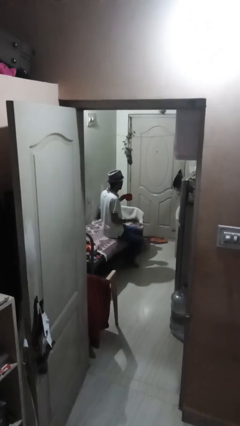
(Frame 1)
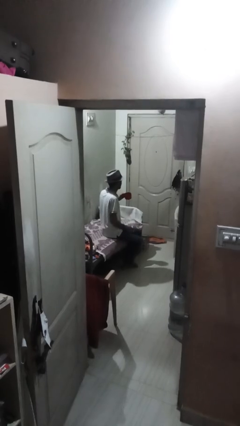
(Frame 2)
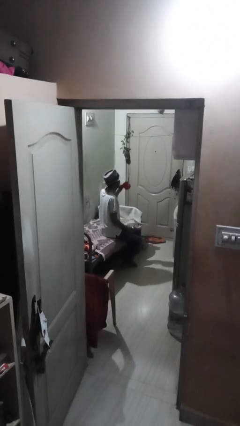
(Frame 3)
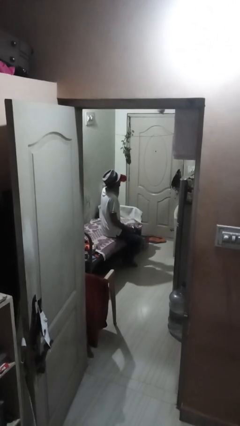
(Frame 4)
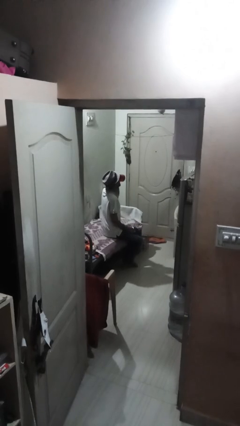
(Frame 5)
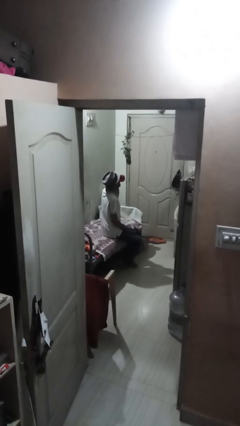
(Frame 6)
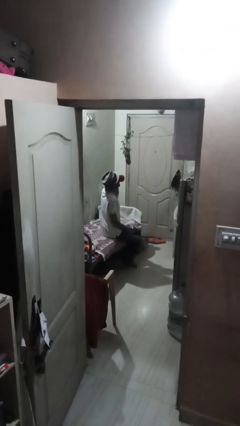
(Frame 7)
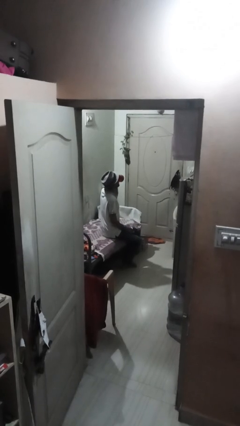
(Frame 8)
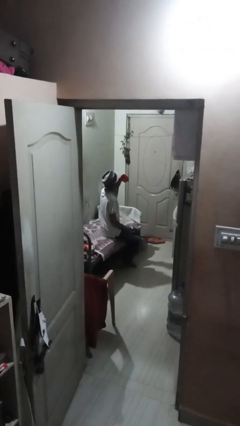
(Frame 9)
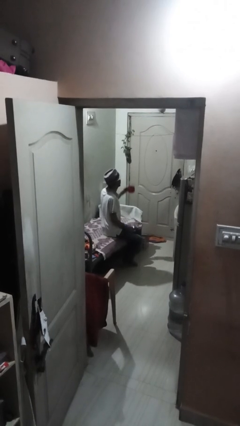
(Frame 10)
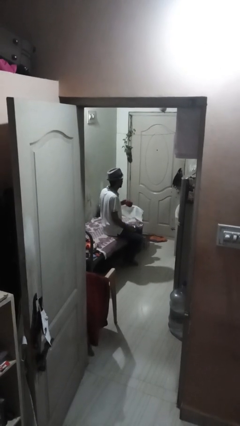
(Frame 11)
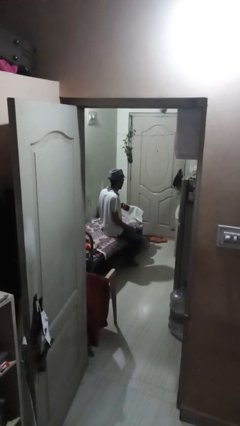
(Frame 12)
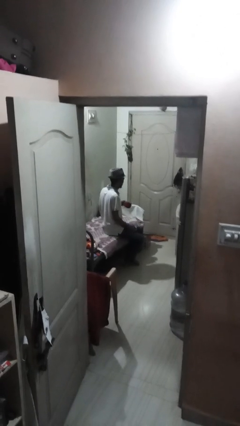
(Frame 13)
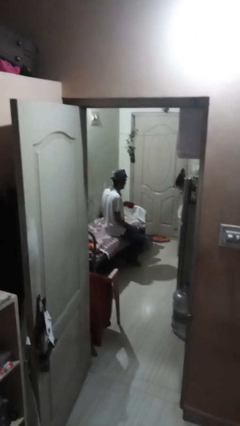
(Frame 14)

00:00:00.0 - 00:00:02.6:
person drinks from mug

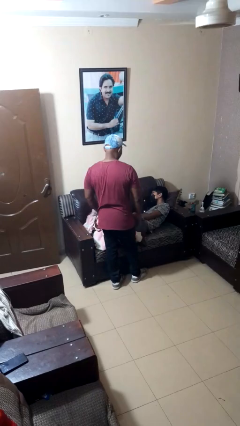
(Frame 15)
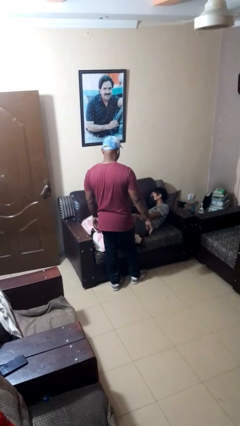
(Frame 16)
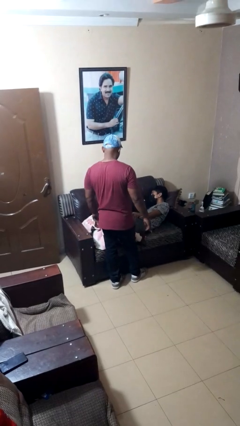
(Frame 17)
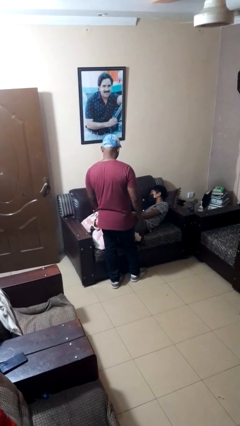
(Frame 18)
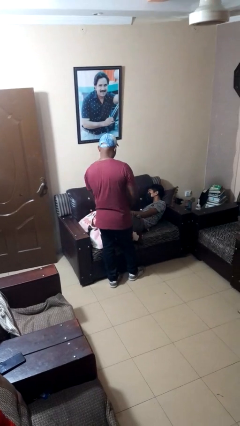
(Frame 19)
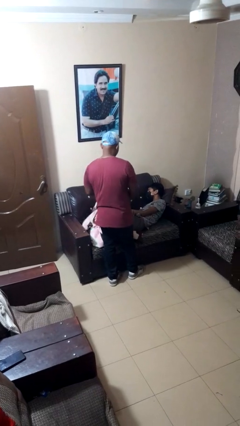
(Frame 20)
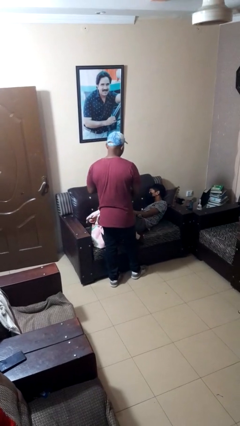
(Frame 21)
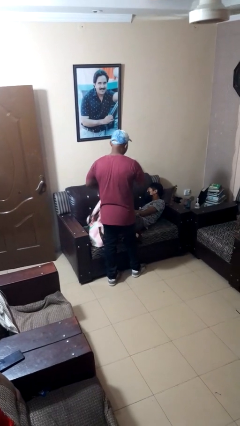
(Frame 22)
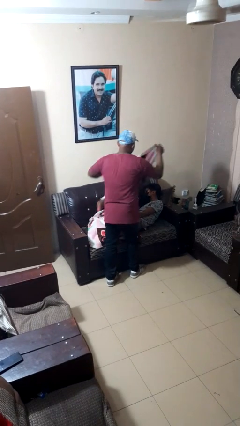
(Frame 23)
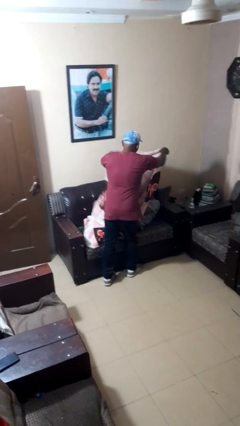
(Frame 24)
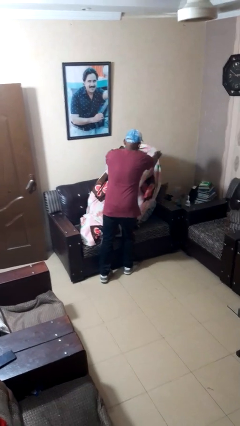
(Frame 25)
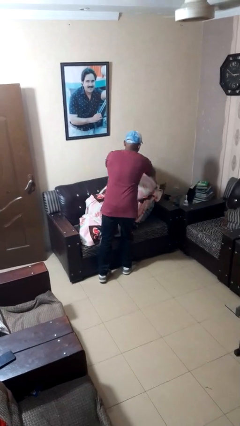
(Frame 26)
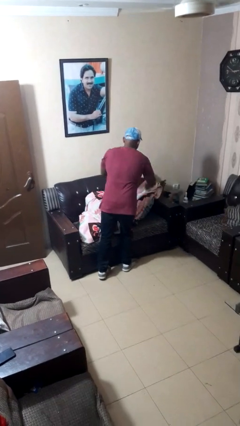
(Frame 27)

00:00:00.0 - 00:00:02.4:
person covers friend with blanket

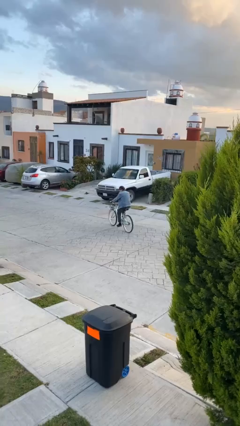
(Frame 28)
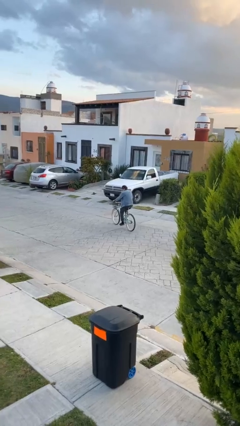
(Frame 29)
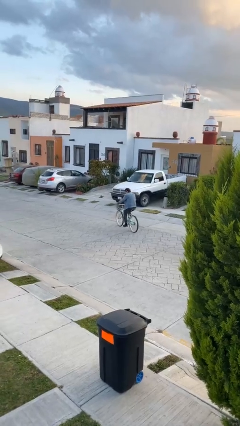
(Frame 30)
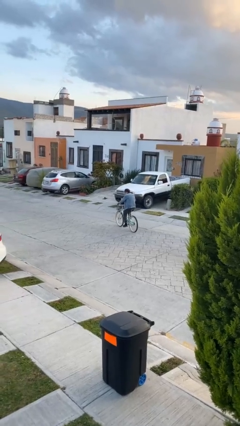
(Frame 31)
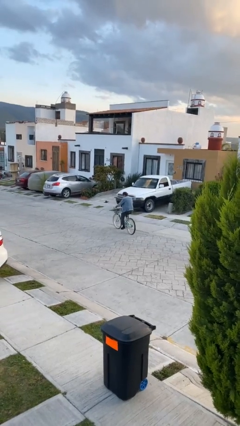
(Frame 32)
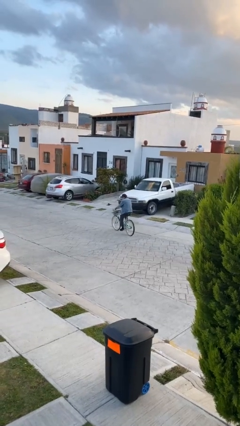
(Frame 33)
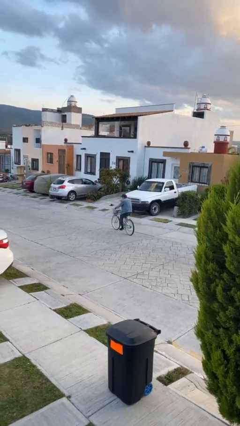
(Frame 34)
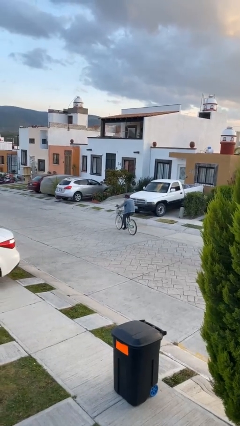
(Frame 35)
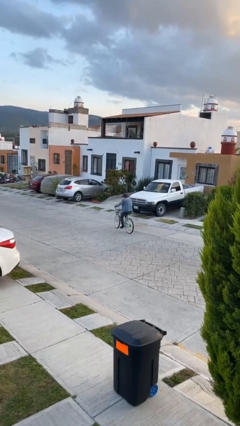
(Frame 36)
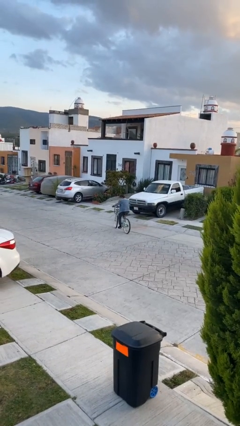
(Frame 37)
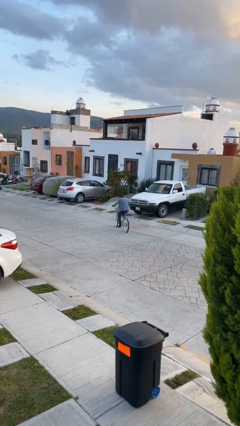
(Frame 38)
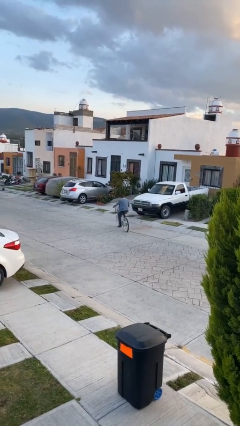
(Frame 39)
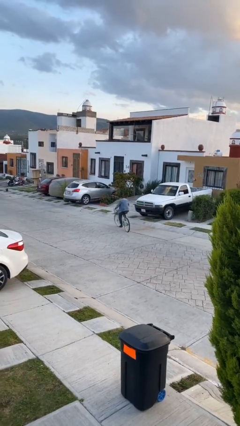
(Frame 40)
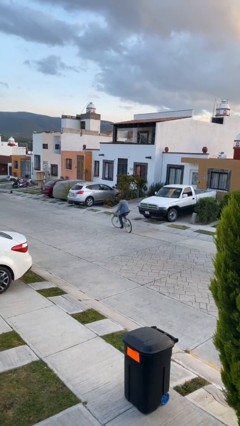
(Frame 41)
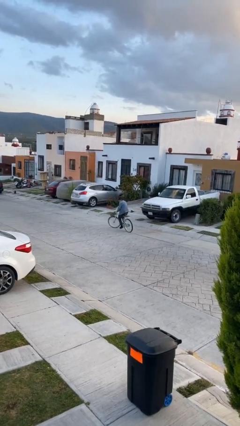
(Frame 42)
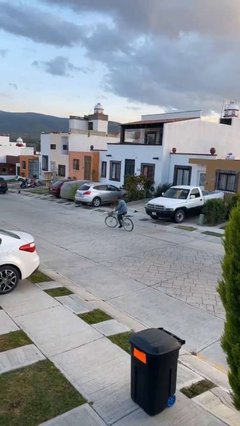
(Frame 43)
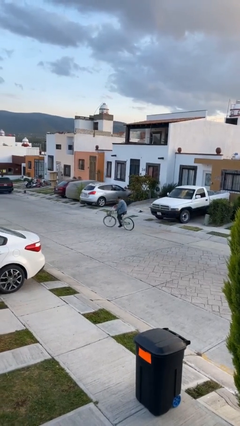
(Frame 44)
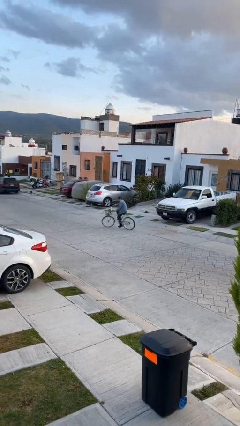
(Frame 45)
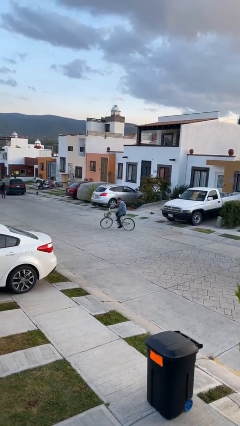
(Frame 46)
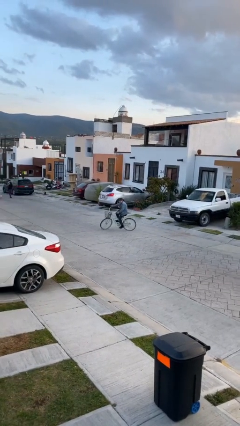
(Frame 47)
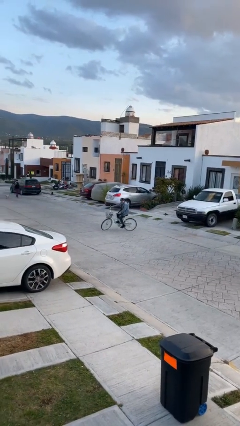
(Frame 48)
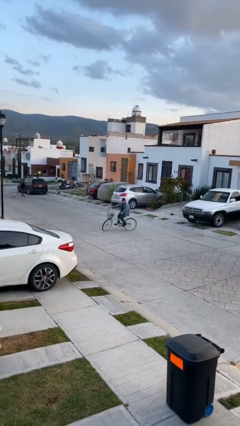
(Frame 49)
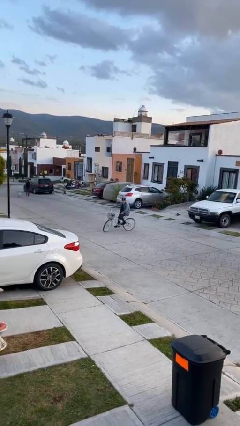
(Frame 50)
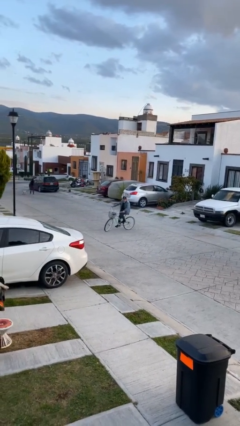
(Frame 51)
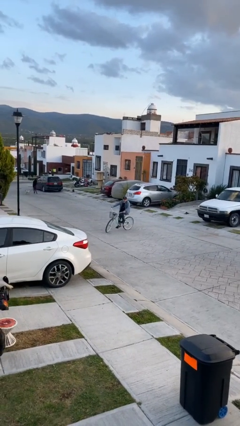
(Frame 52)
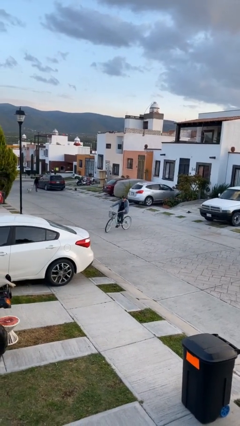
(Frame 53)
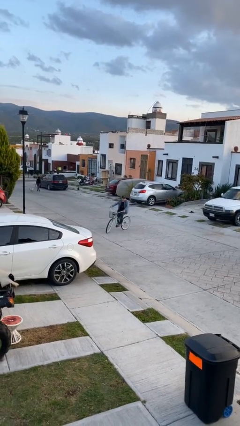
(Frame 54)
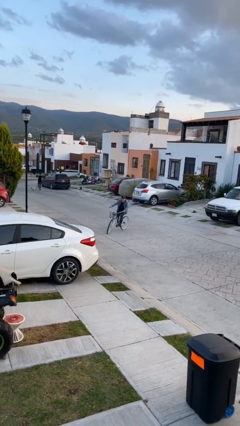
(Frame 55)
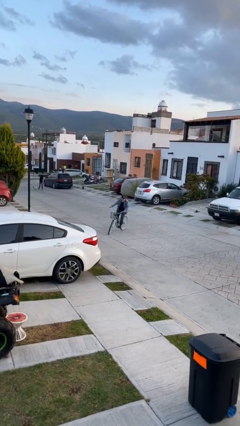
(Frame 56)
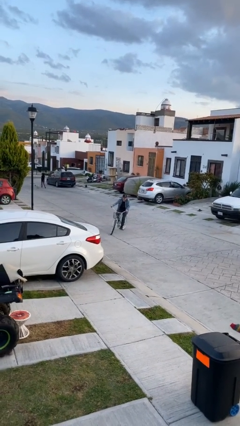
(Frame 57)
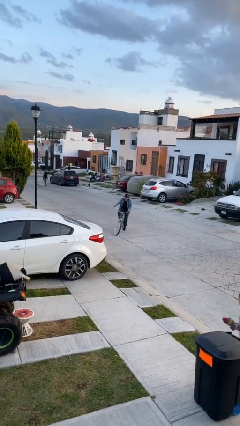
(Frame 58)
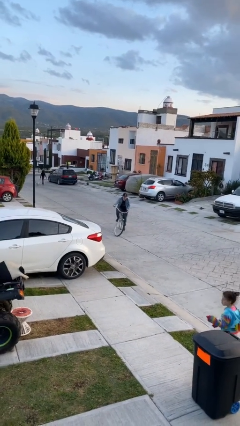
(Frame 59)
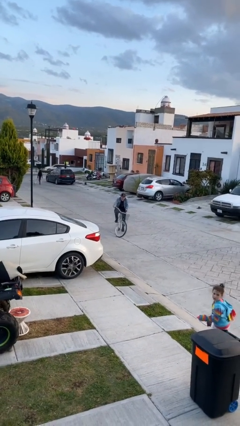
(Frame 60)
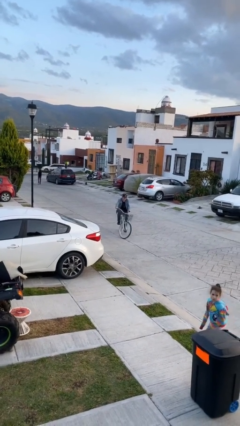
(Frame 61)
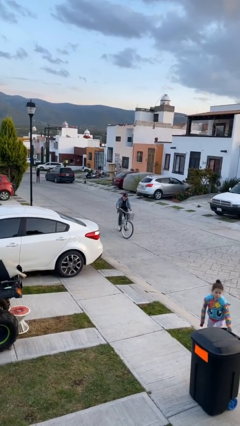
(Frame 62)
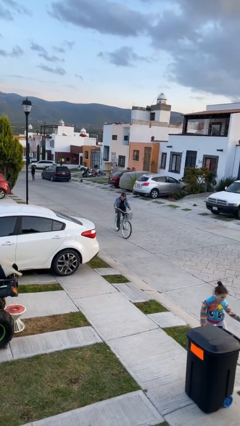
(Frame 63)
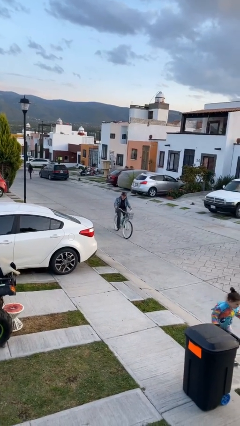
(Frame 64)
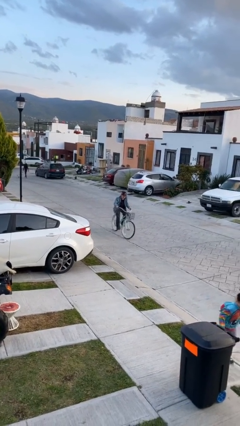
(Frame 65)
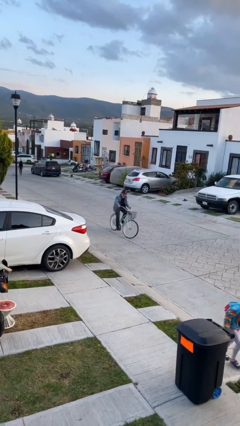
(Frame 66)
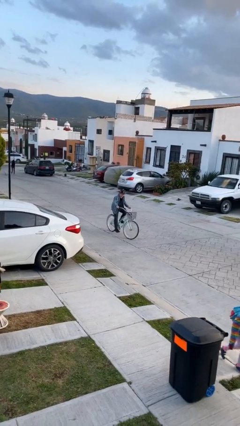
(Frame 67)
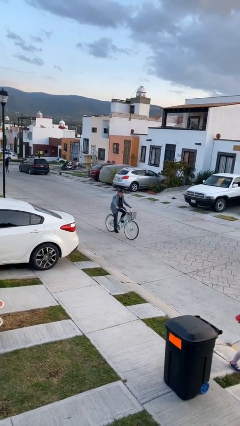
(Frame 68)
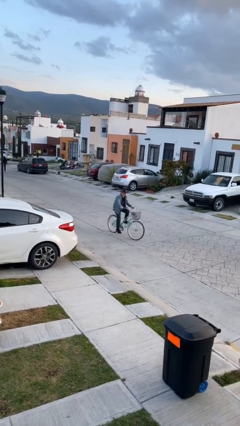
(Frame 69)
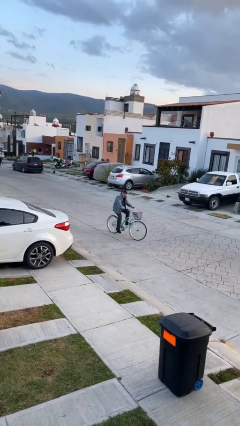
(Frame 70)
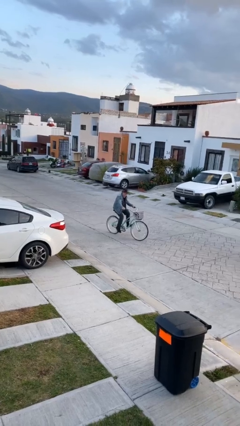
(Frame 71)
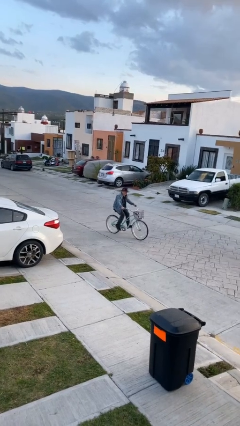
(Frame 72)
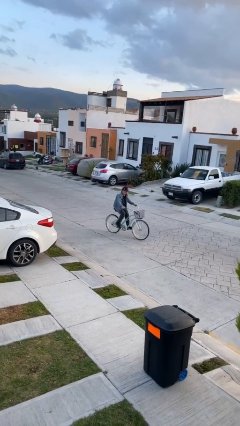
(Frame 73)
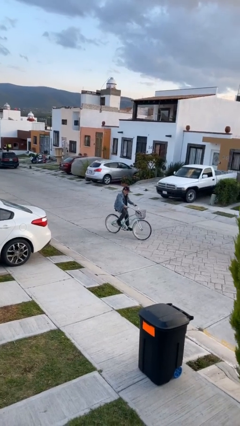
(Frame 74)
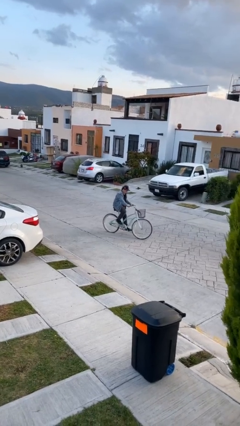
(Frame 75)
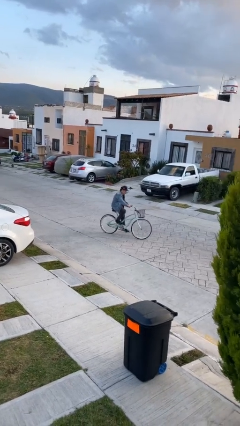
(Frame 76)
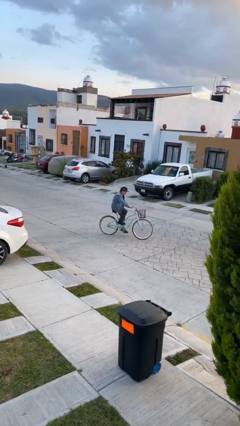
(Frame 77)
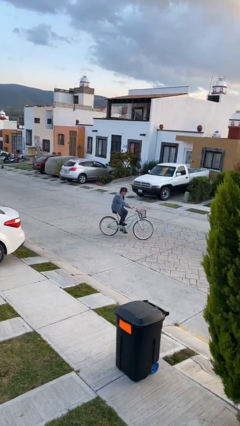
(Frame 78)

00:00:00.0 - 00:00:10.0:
person rides bicycle

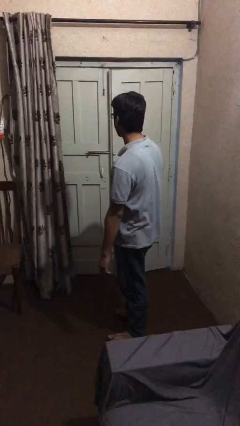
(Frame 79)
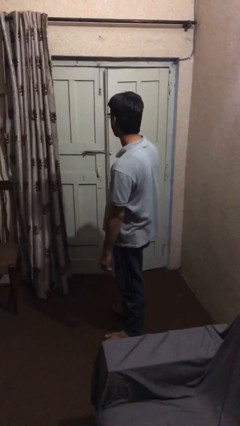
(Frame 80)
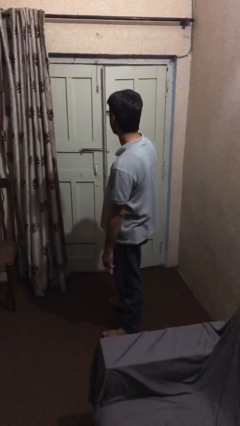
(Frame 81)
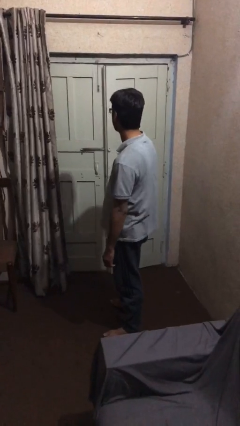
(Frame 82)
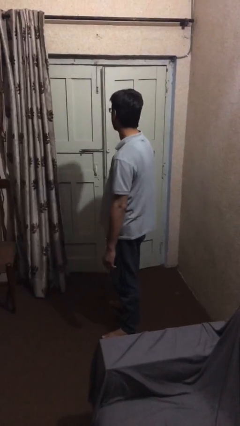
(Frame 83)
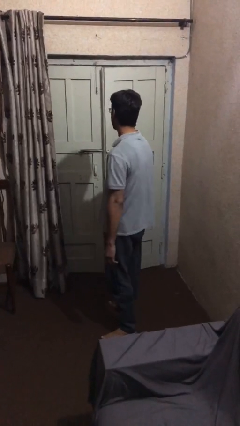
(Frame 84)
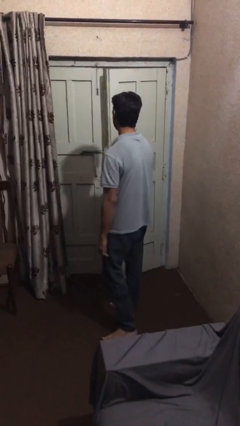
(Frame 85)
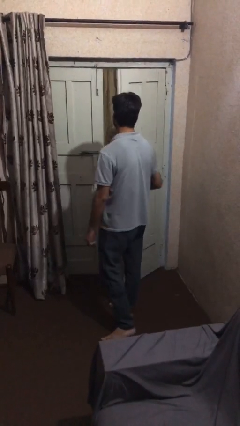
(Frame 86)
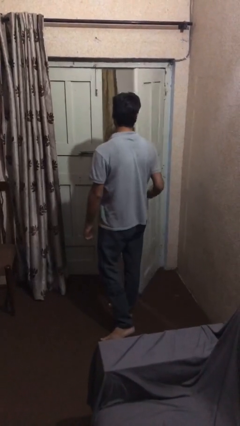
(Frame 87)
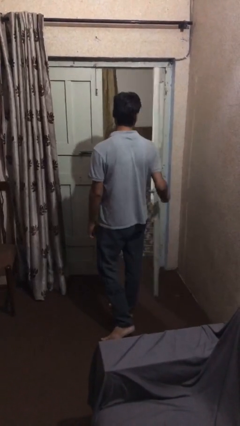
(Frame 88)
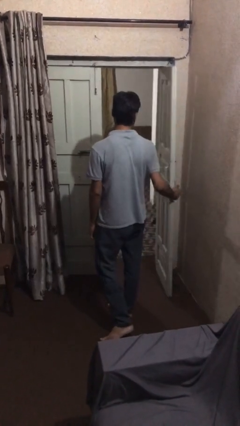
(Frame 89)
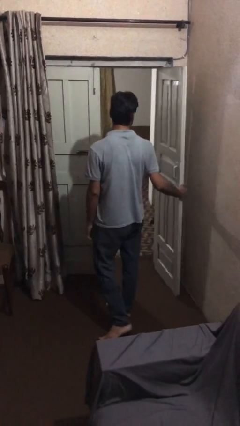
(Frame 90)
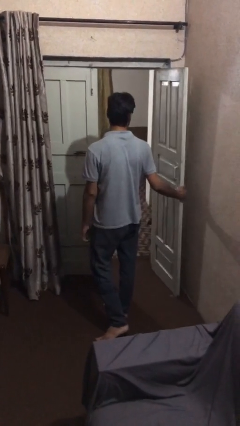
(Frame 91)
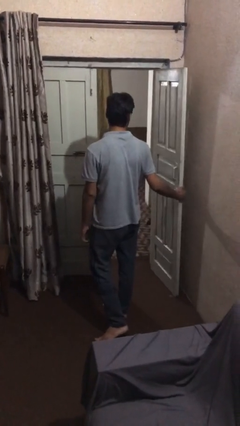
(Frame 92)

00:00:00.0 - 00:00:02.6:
person opens facility door
